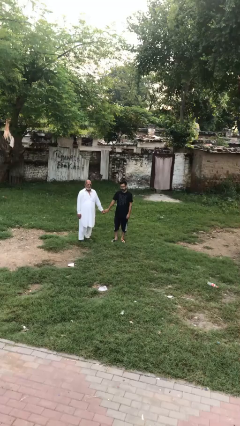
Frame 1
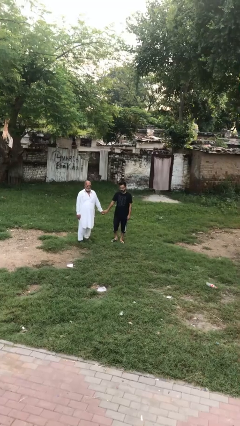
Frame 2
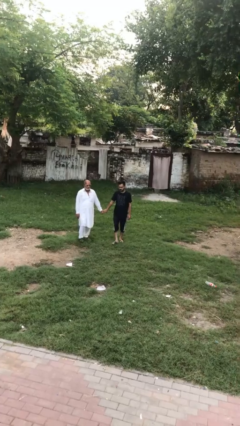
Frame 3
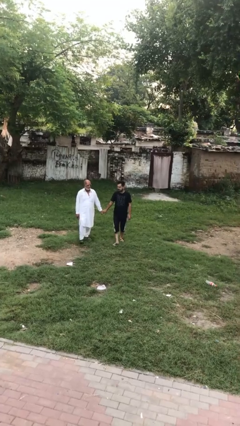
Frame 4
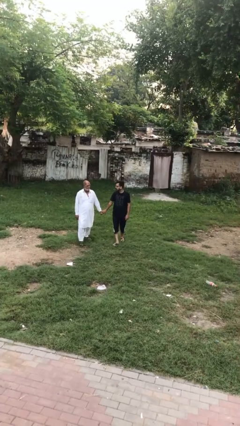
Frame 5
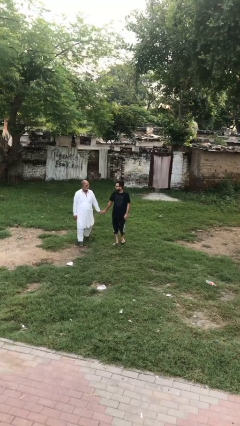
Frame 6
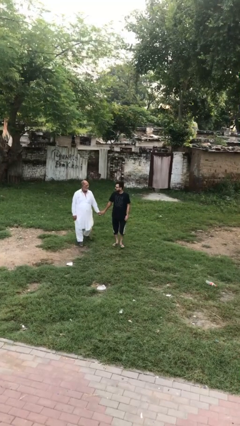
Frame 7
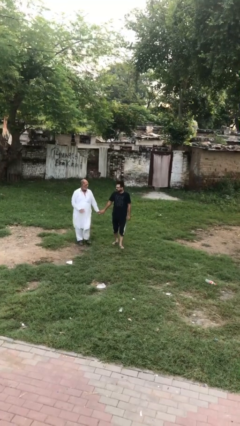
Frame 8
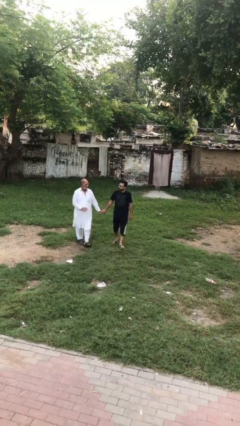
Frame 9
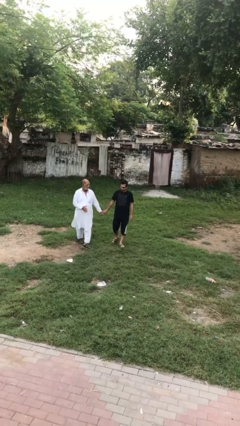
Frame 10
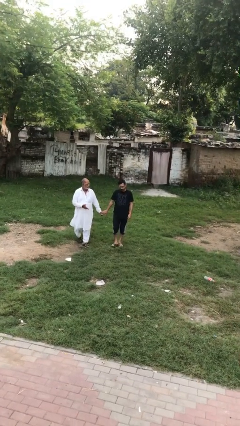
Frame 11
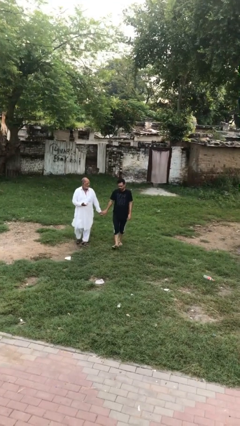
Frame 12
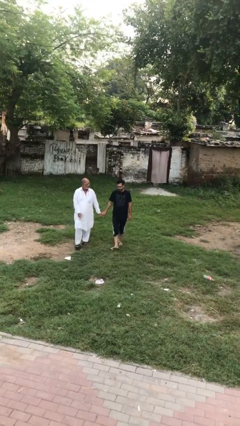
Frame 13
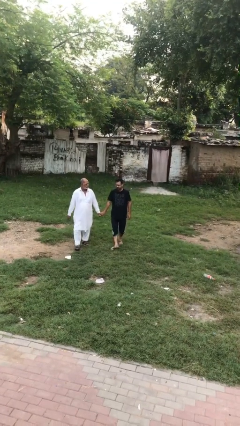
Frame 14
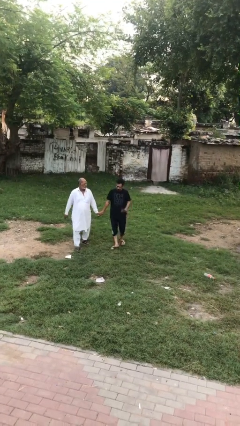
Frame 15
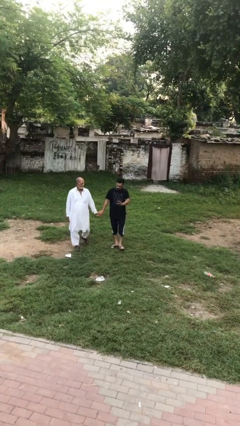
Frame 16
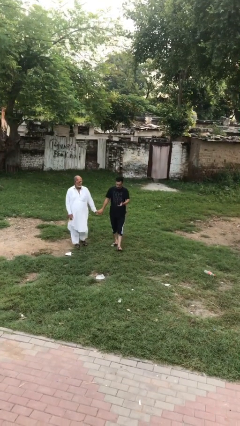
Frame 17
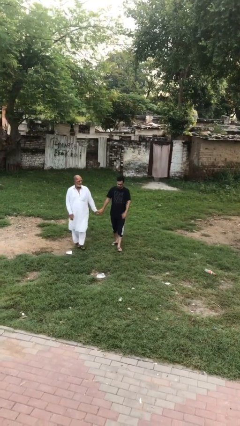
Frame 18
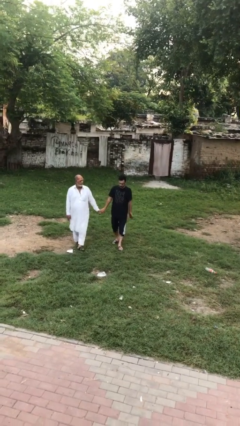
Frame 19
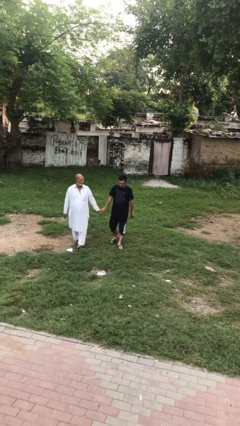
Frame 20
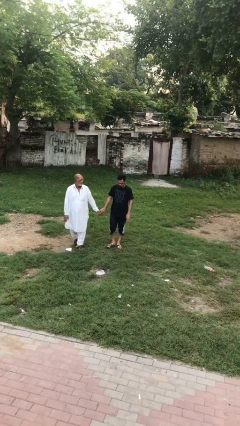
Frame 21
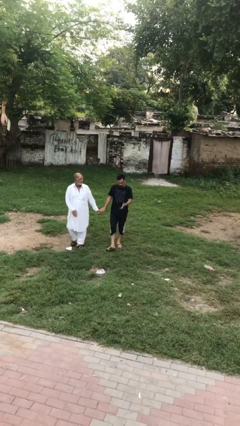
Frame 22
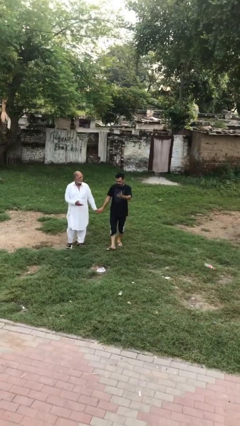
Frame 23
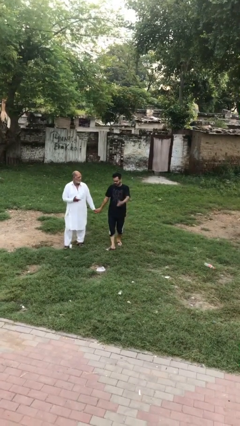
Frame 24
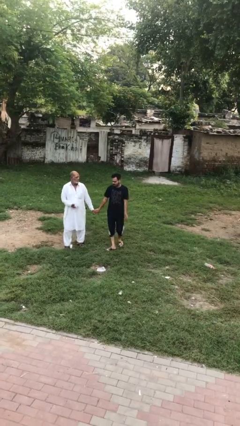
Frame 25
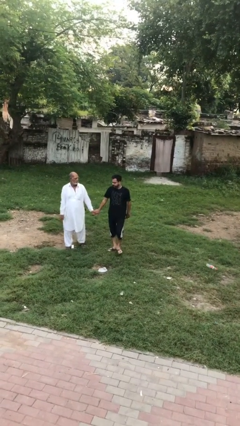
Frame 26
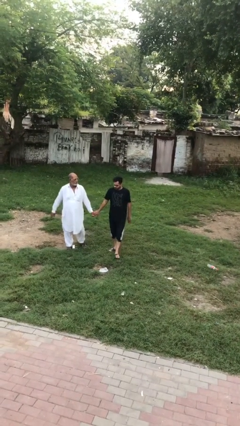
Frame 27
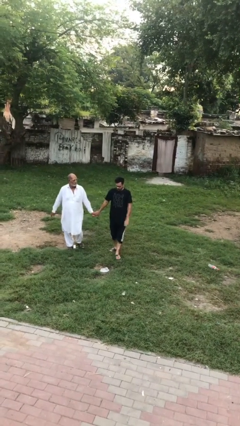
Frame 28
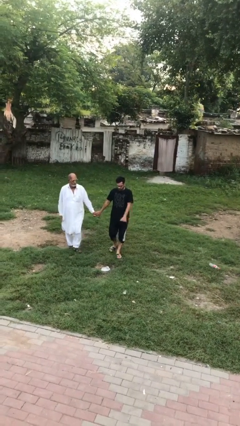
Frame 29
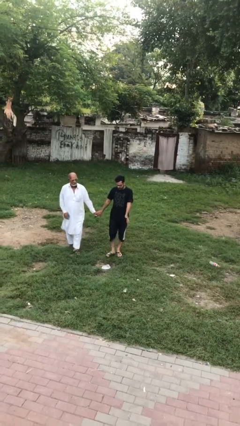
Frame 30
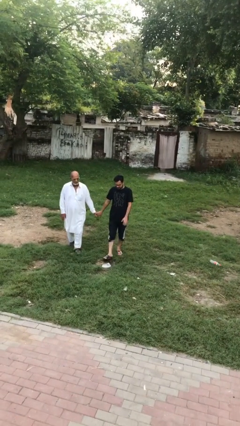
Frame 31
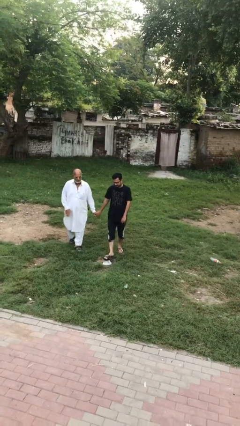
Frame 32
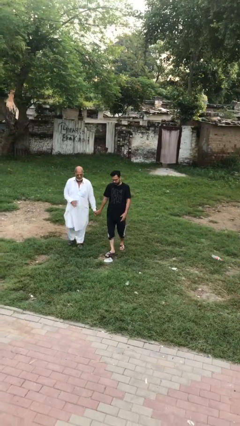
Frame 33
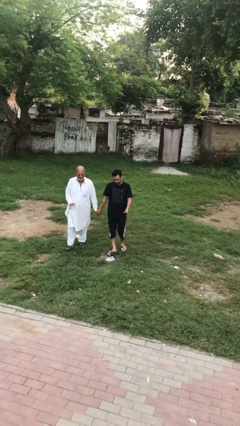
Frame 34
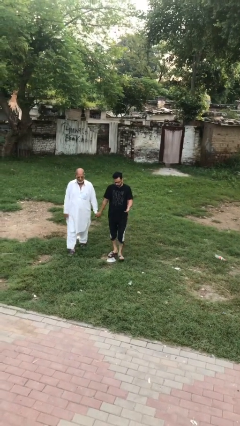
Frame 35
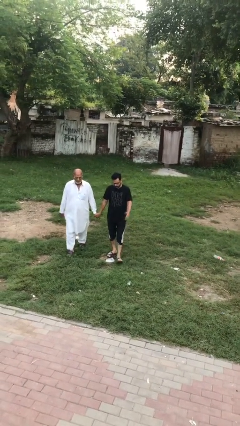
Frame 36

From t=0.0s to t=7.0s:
person holds hand

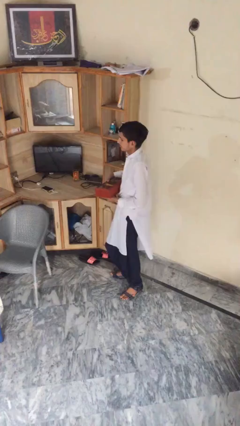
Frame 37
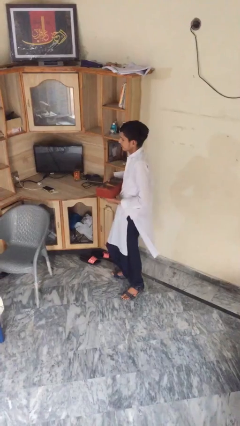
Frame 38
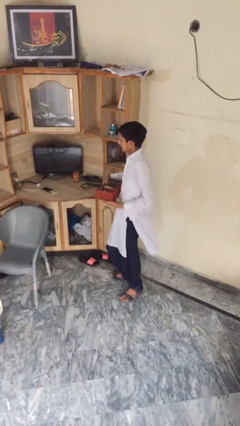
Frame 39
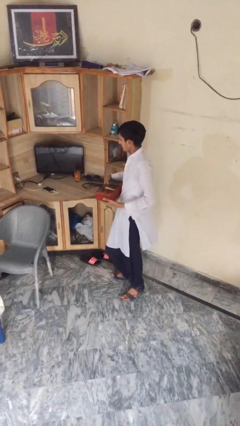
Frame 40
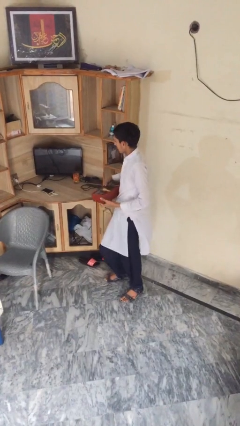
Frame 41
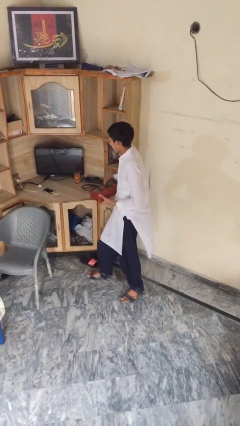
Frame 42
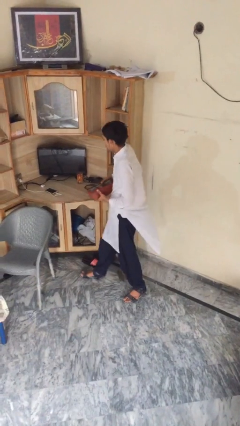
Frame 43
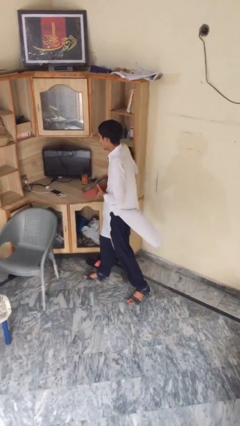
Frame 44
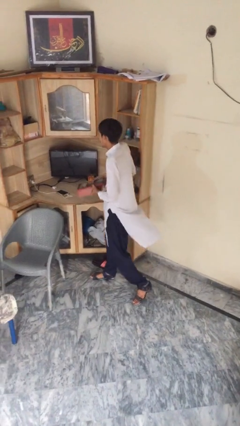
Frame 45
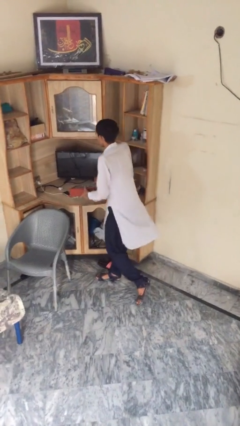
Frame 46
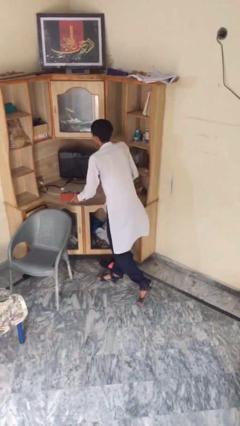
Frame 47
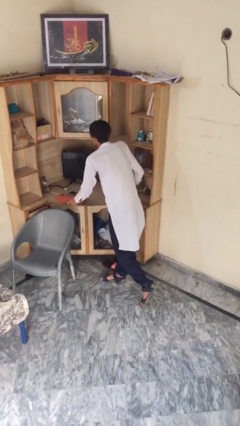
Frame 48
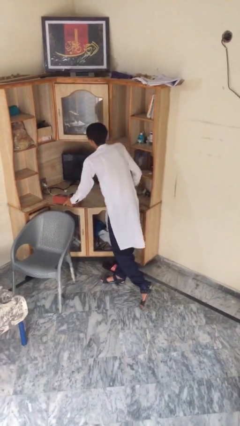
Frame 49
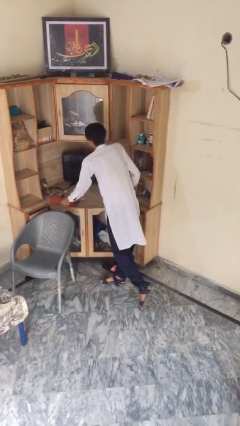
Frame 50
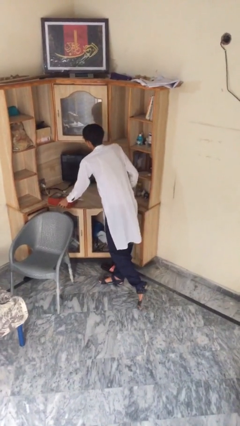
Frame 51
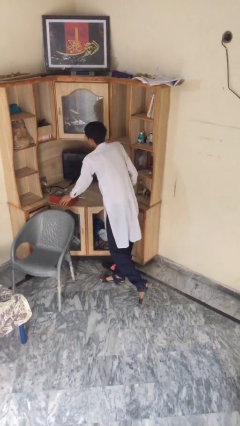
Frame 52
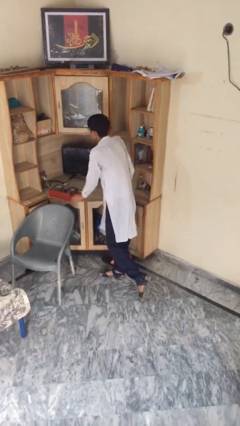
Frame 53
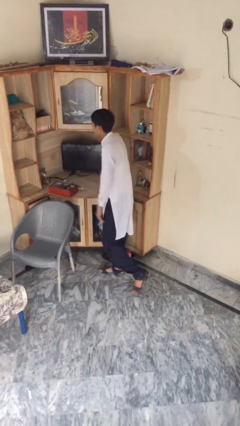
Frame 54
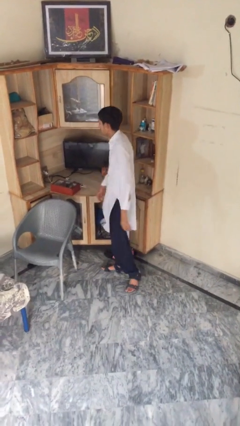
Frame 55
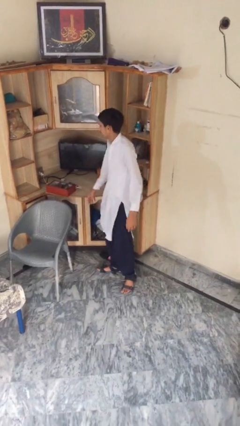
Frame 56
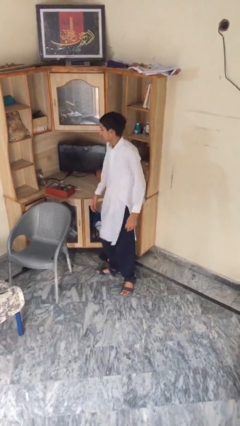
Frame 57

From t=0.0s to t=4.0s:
person puts down object on table

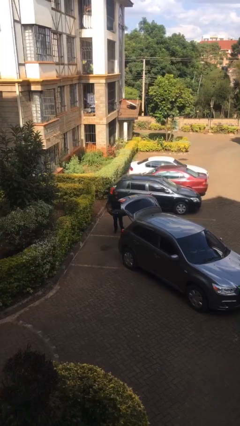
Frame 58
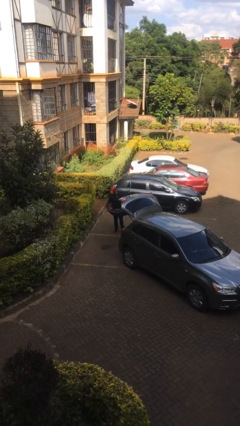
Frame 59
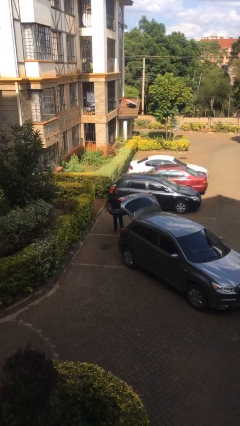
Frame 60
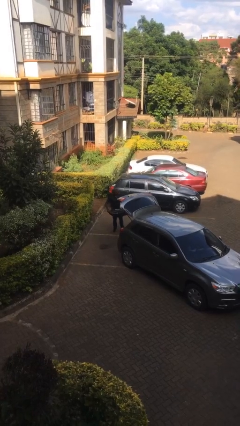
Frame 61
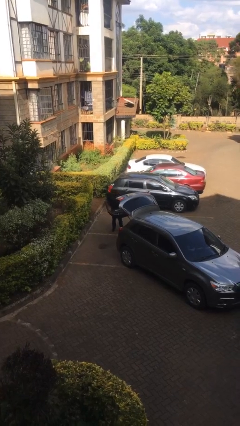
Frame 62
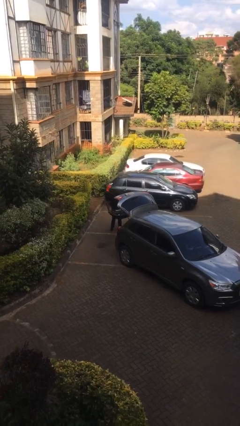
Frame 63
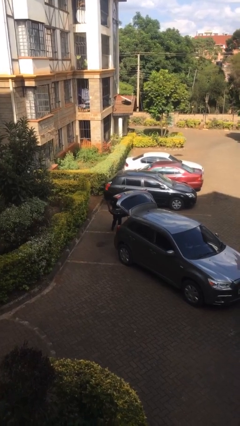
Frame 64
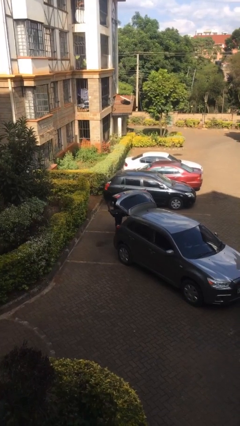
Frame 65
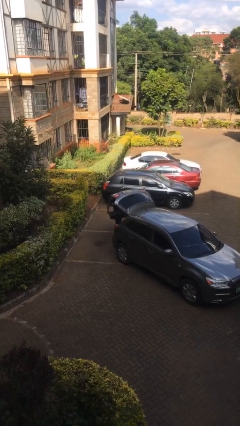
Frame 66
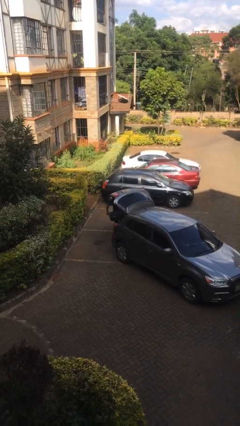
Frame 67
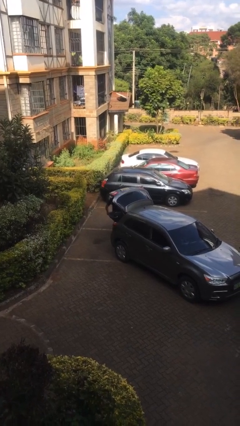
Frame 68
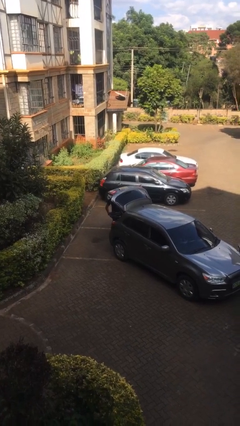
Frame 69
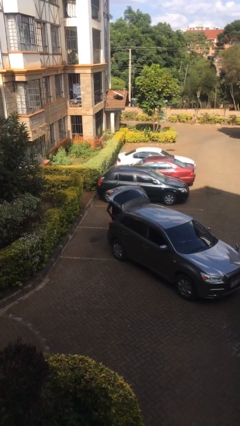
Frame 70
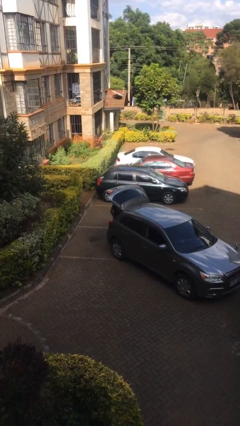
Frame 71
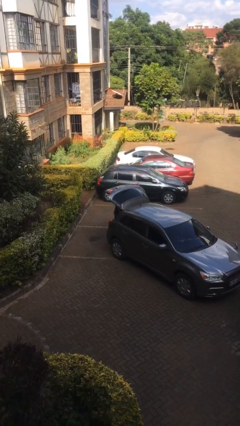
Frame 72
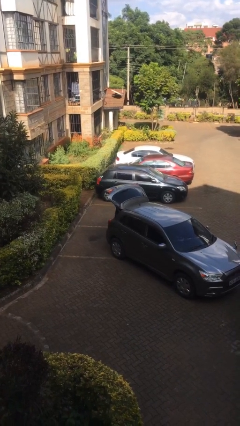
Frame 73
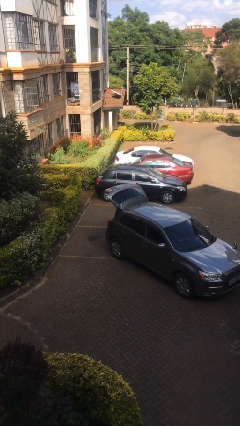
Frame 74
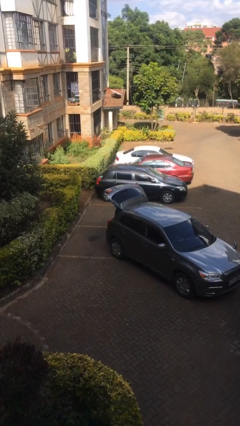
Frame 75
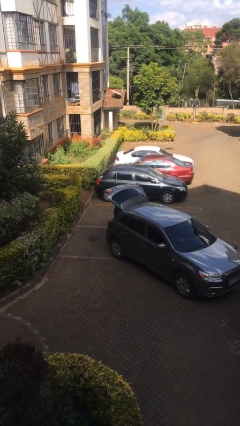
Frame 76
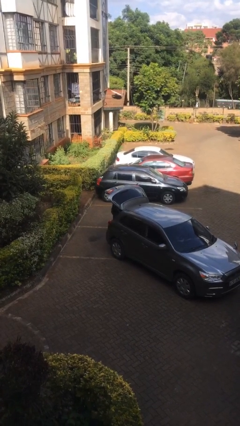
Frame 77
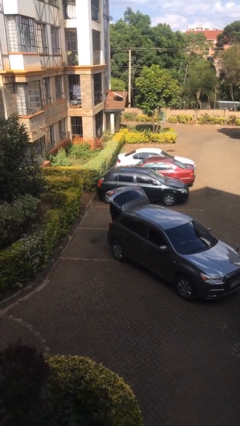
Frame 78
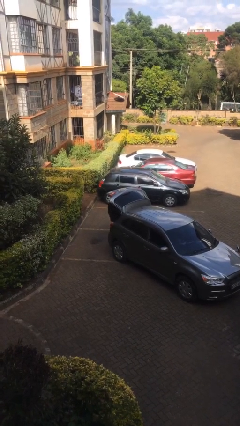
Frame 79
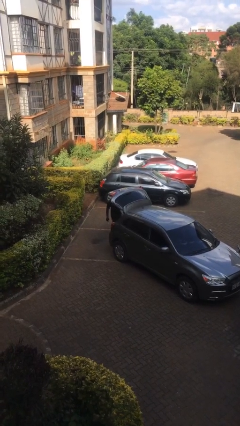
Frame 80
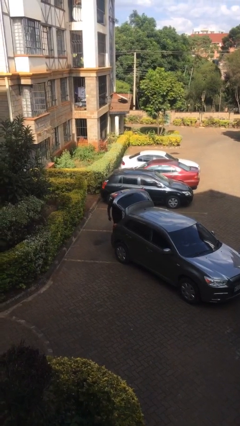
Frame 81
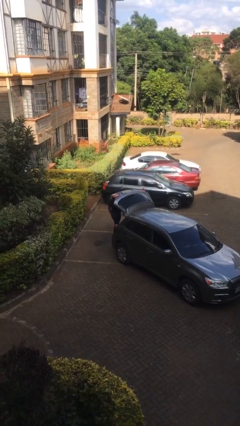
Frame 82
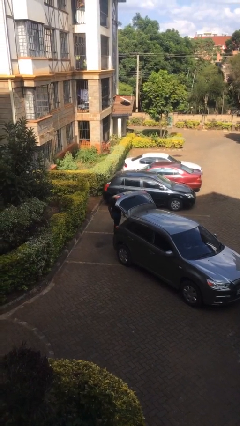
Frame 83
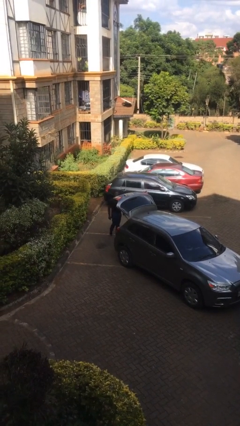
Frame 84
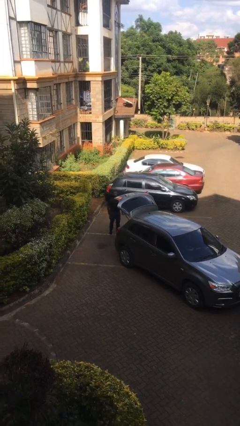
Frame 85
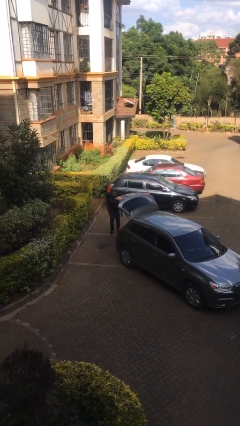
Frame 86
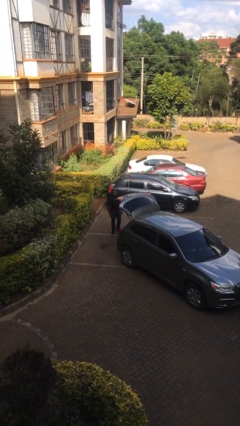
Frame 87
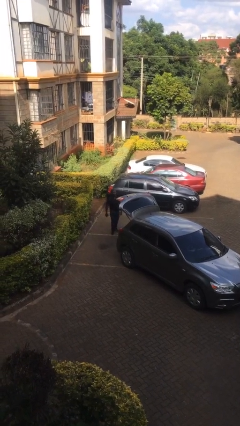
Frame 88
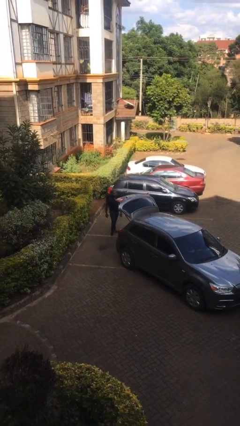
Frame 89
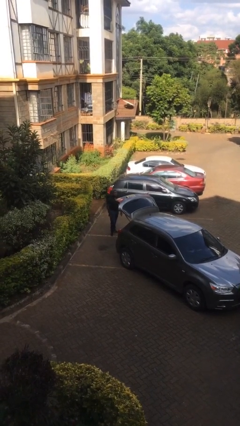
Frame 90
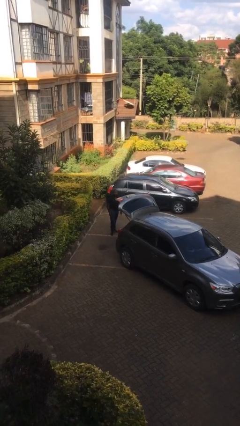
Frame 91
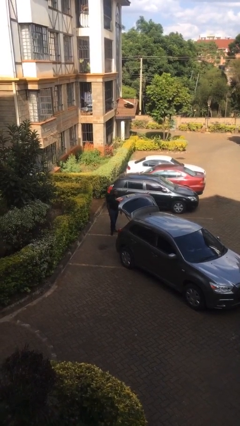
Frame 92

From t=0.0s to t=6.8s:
person loads car
